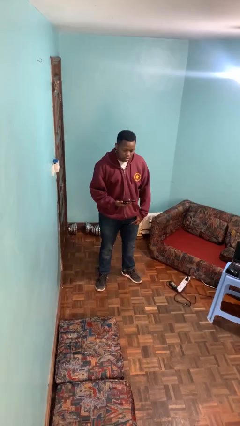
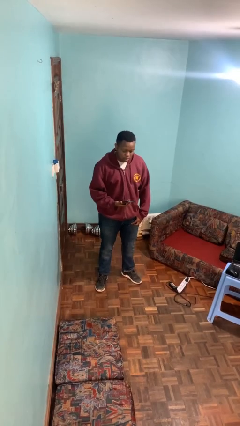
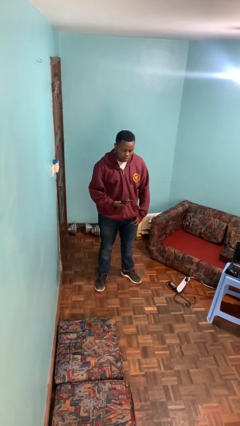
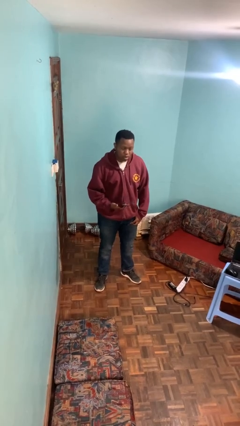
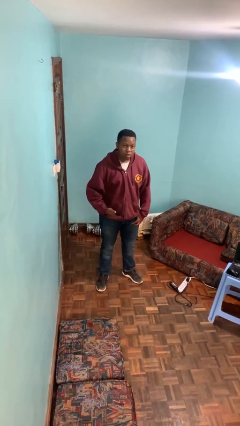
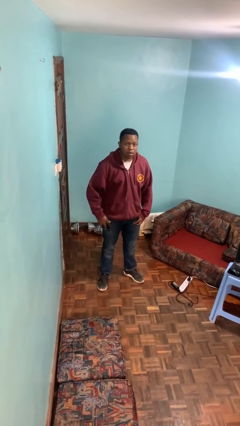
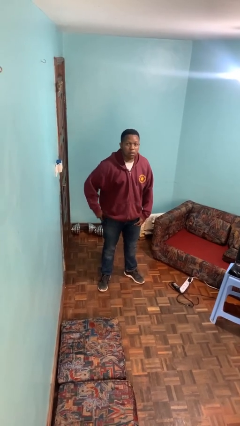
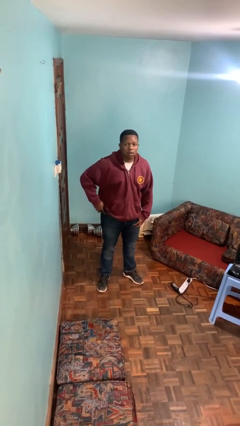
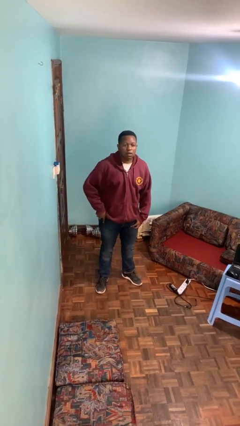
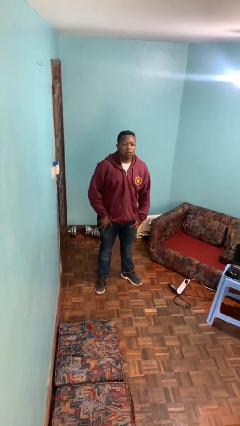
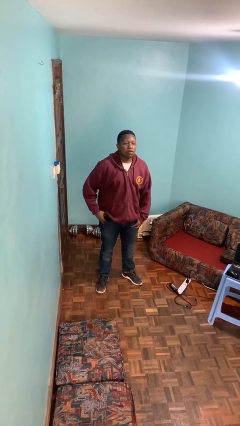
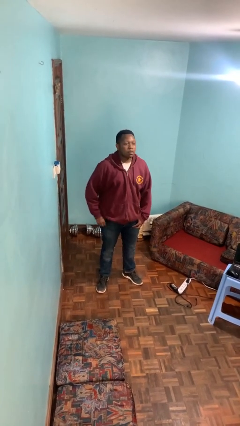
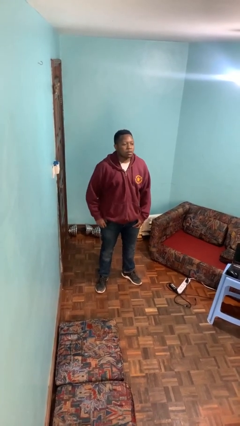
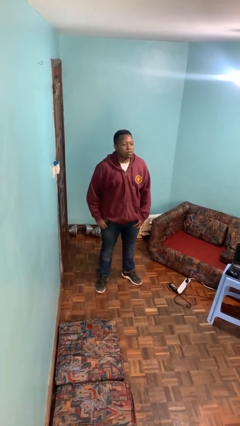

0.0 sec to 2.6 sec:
person puts phone into pocket

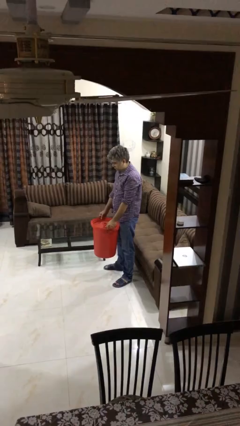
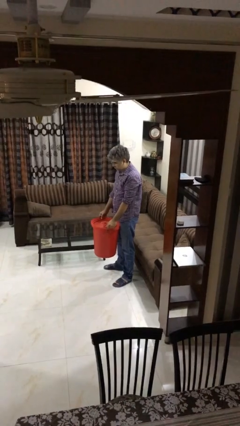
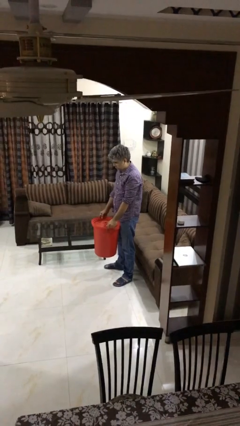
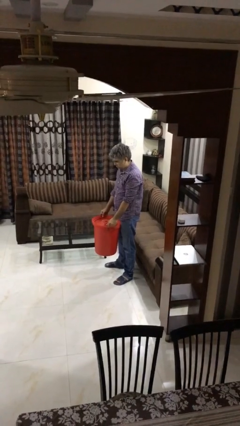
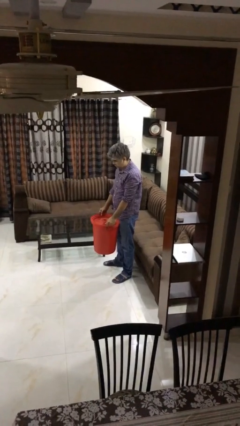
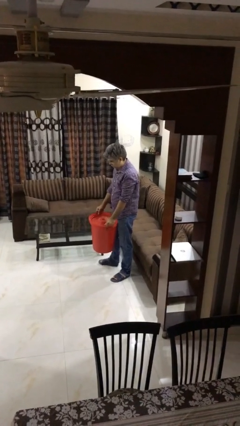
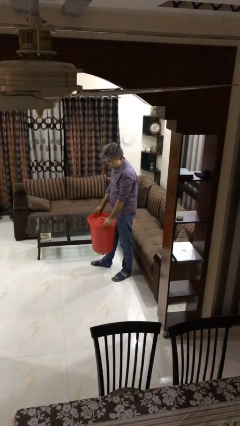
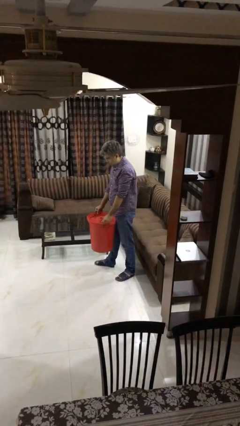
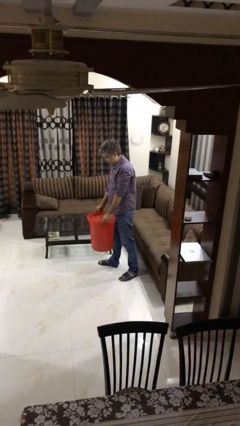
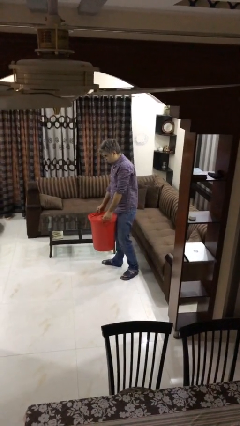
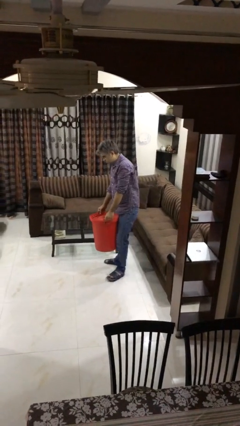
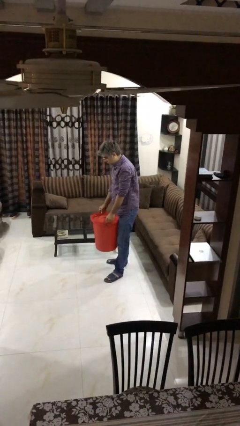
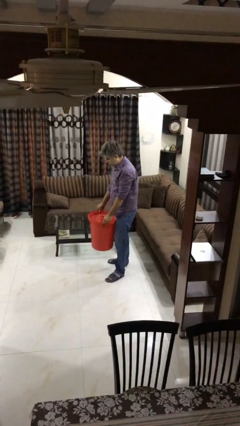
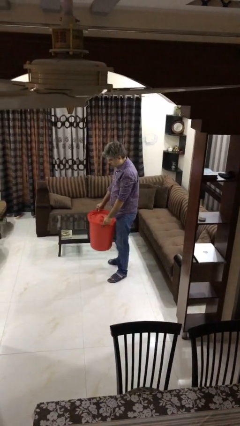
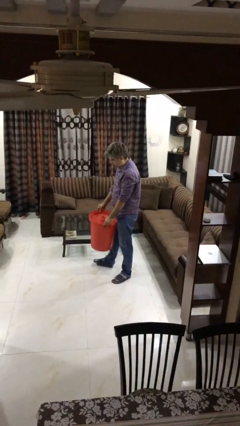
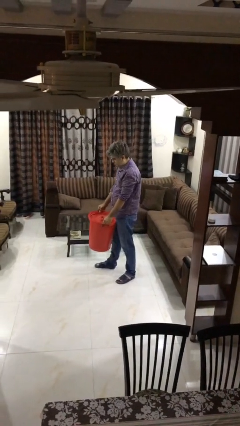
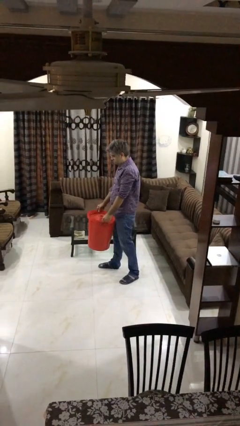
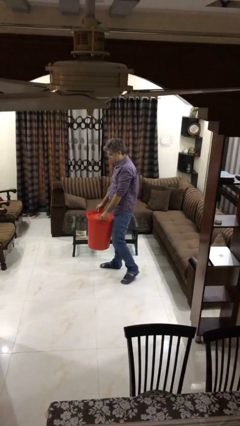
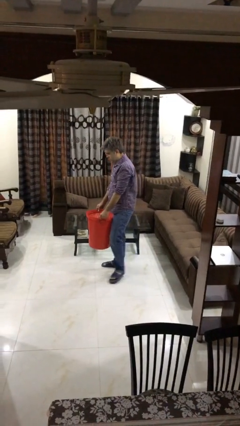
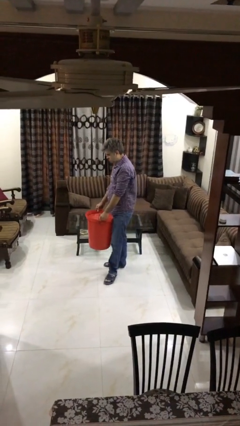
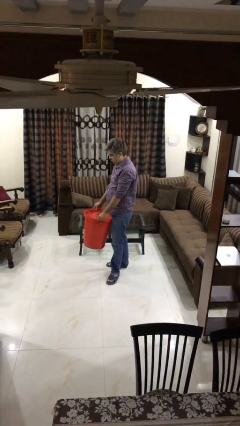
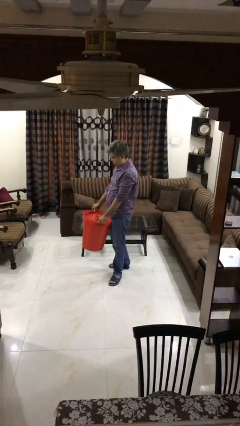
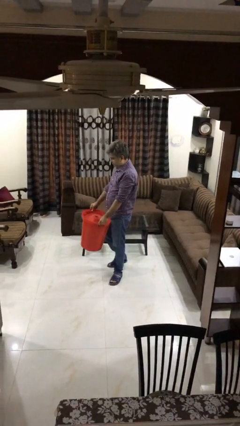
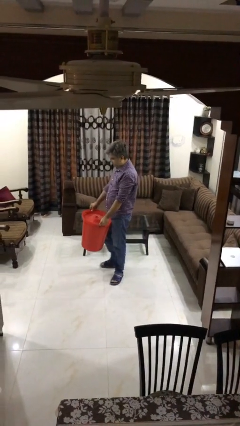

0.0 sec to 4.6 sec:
person carries heavy object

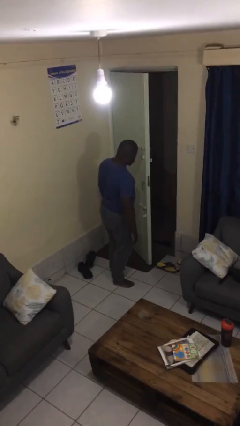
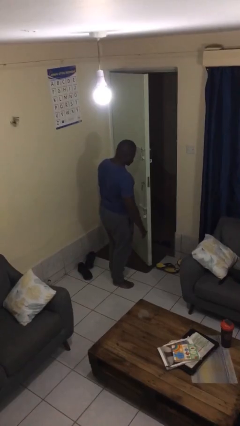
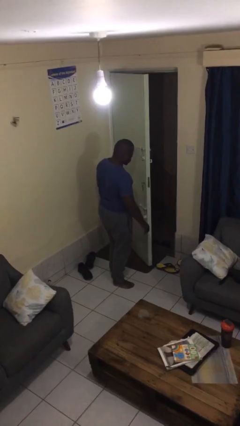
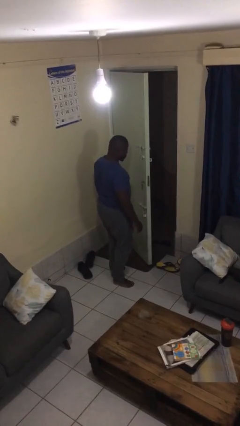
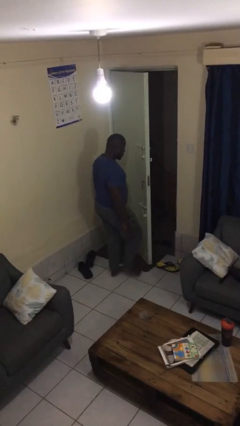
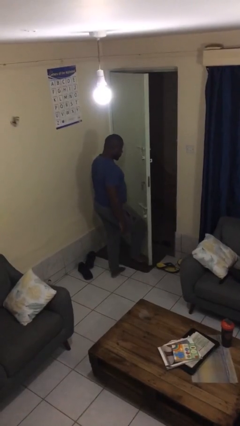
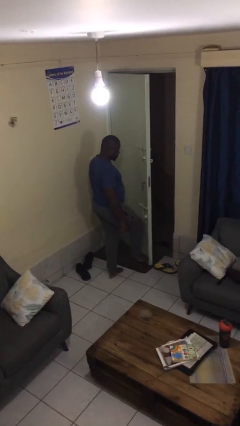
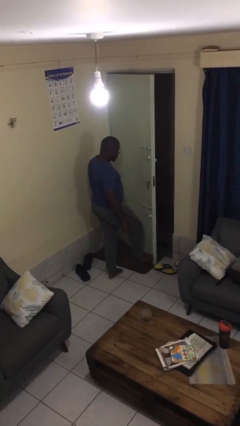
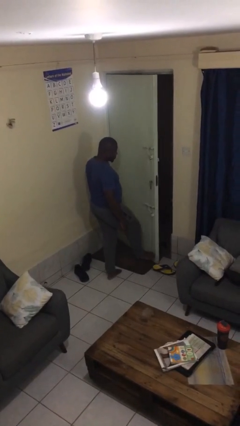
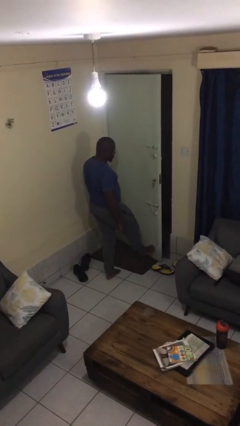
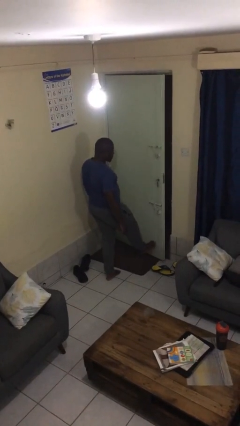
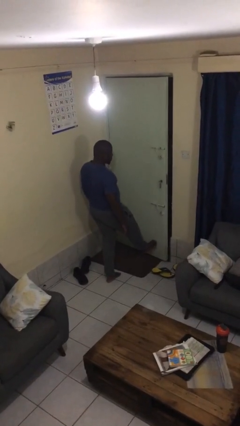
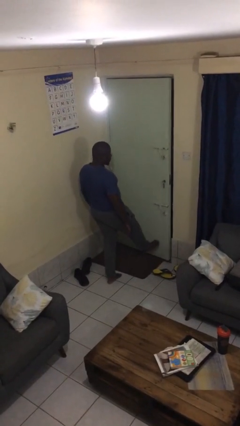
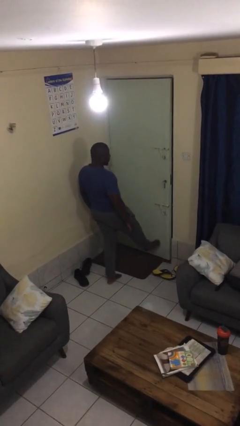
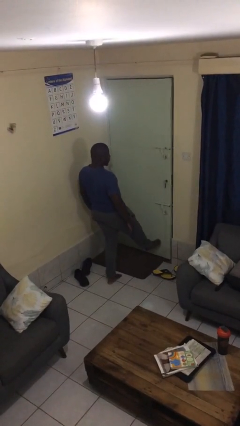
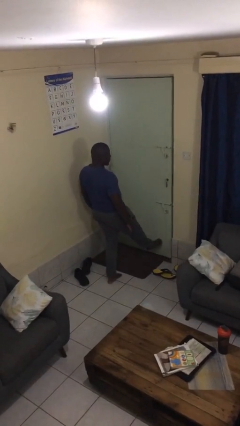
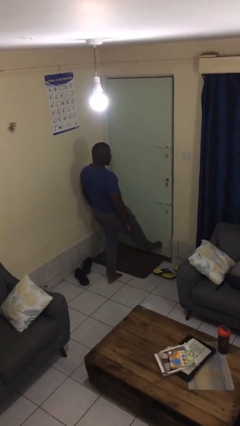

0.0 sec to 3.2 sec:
person closes door with foot

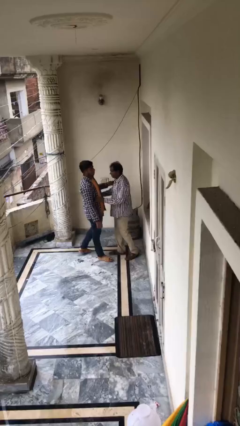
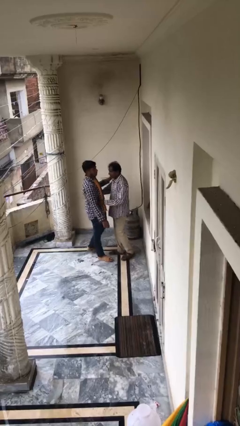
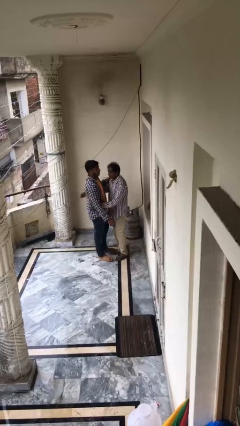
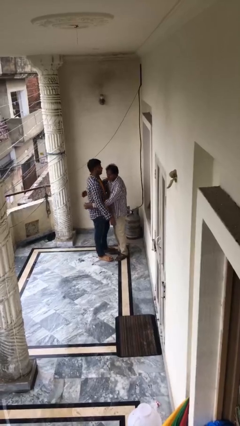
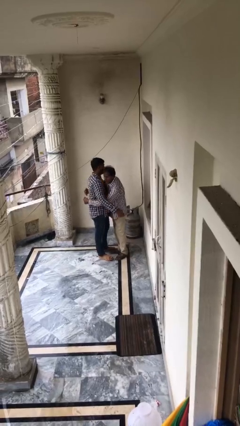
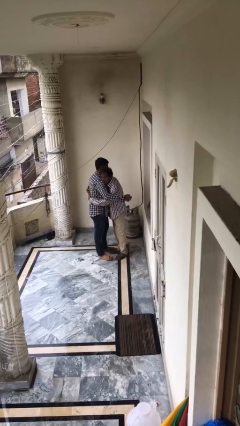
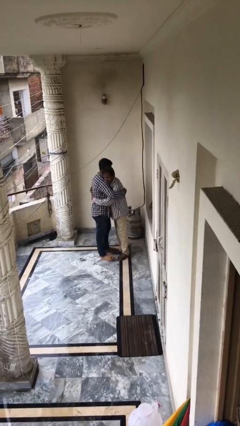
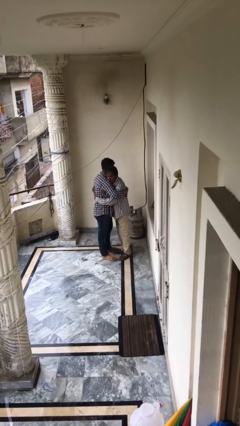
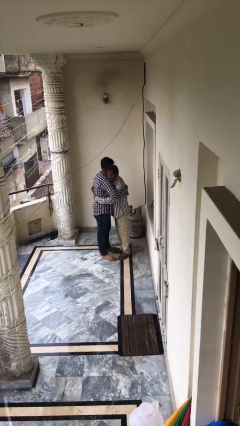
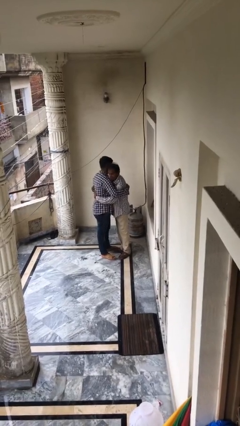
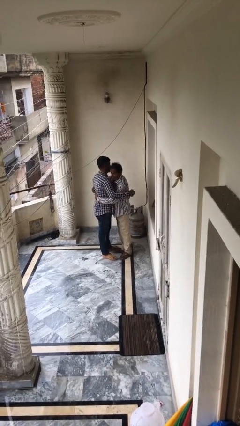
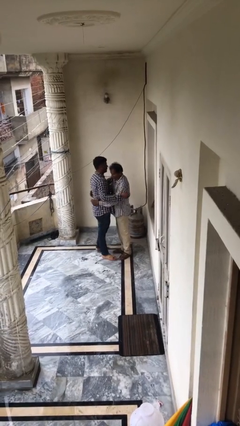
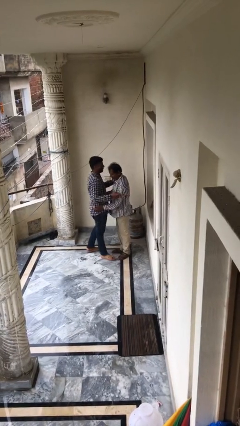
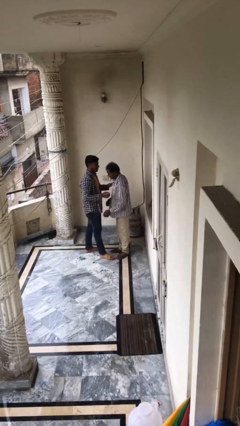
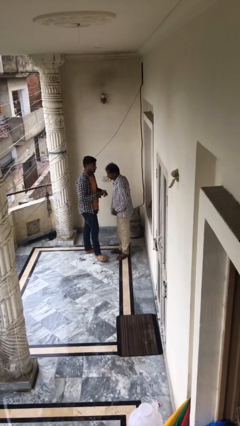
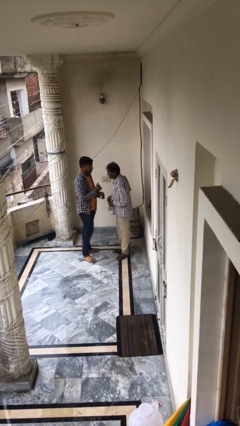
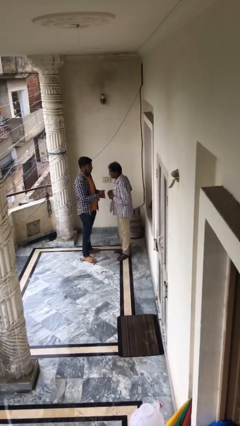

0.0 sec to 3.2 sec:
person embraces person

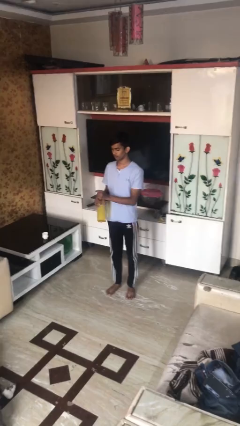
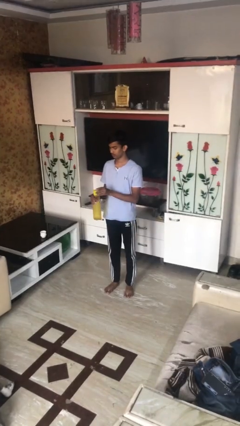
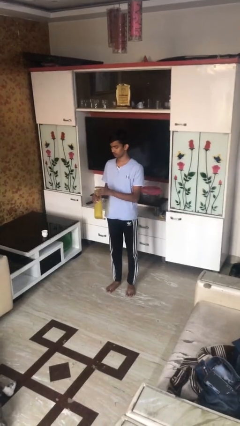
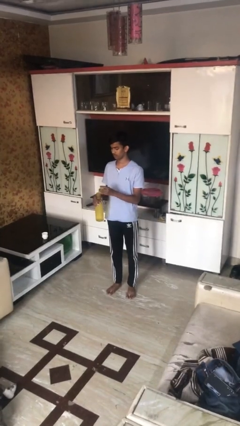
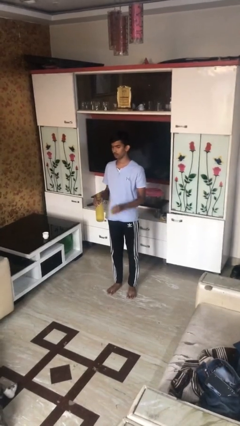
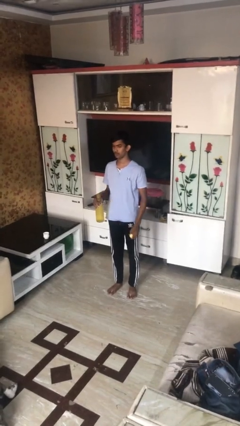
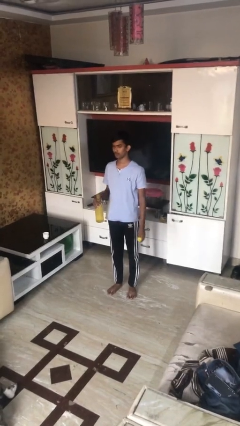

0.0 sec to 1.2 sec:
person unscrews lid from bottle

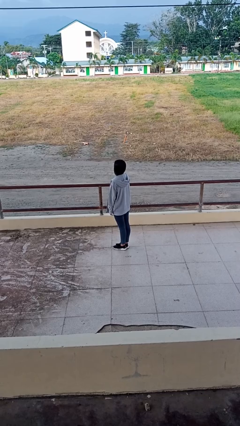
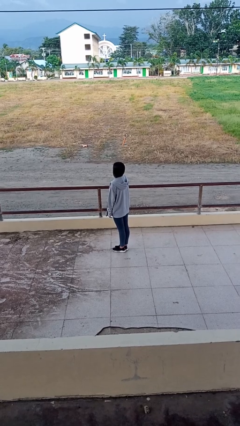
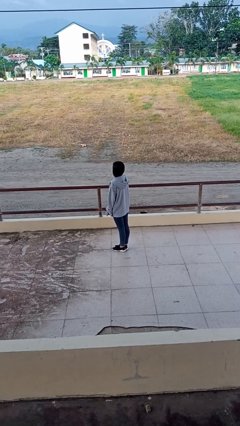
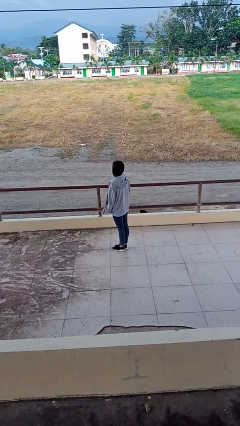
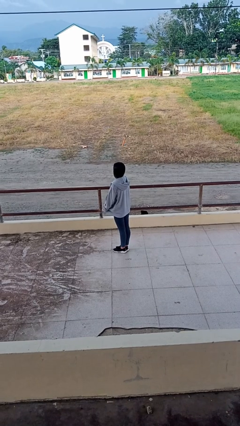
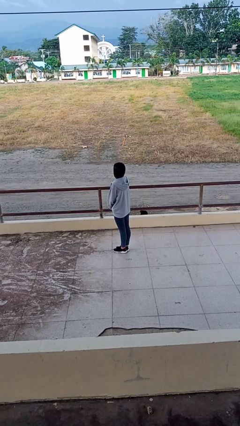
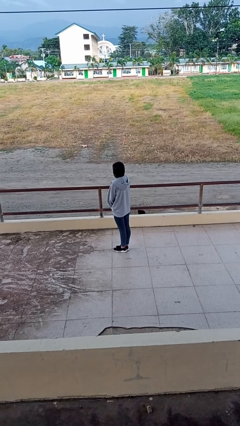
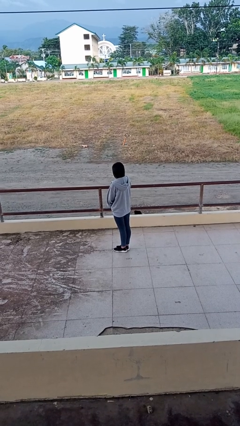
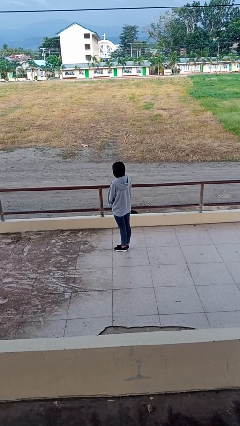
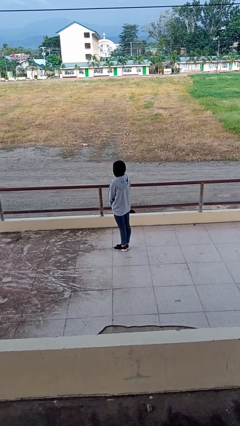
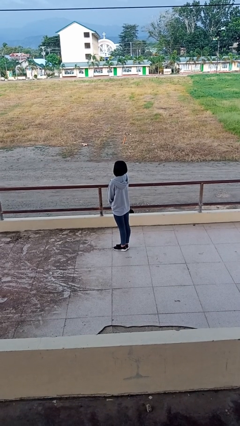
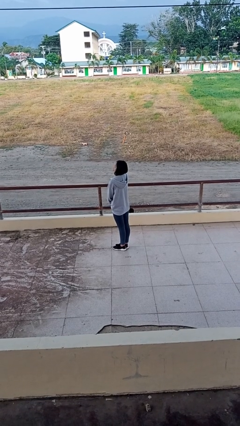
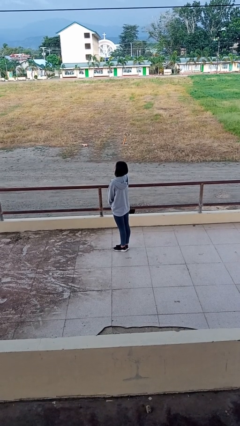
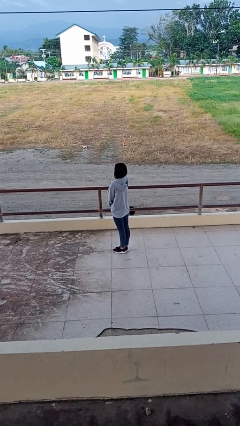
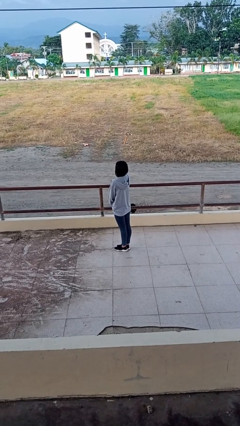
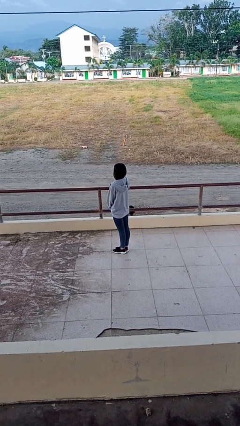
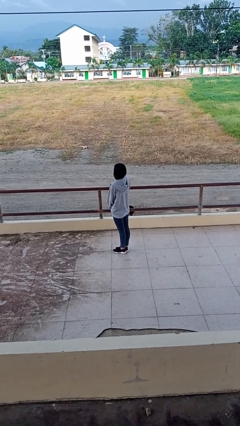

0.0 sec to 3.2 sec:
person zips up jacket
